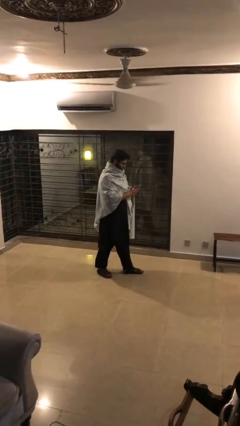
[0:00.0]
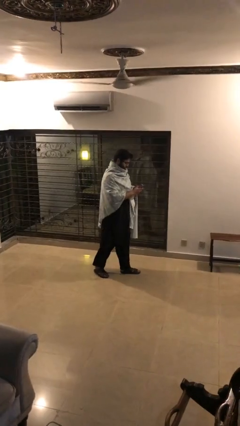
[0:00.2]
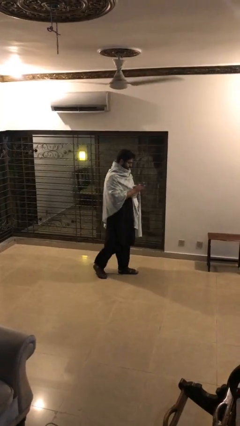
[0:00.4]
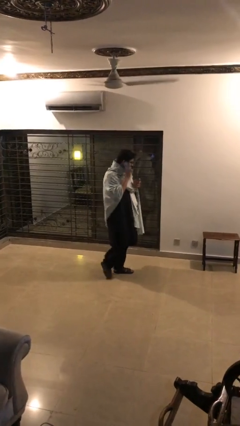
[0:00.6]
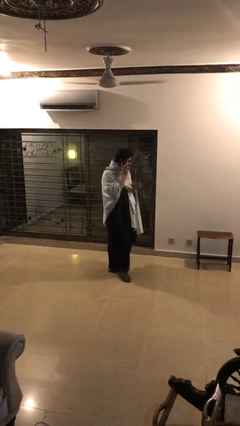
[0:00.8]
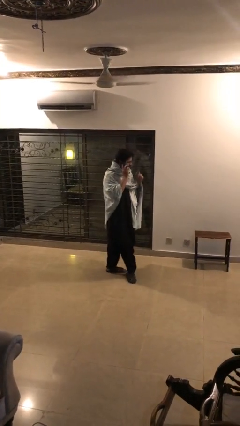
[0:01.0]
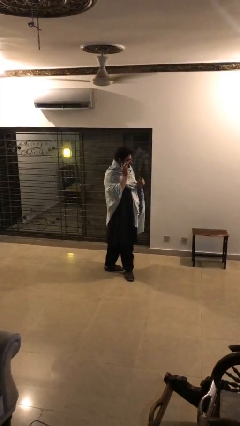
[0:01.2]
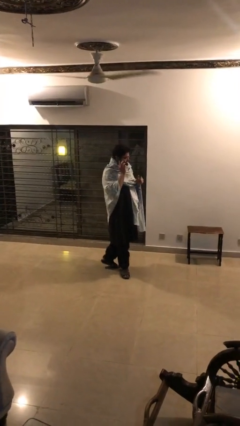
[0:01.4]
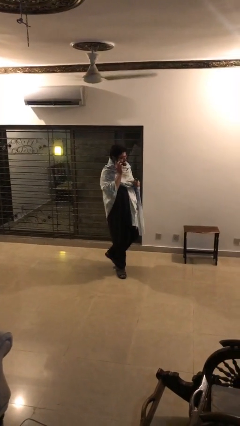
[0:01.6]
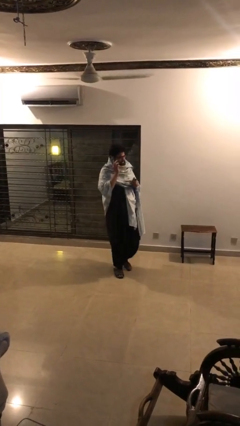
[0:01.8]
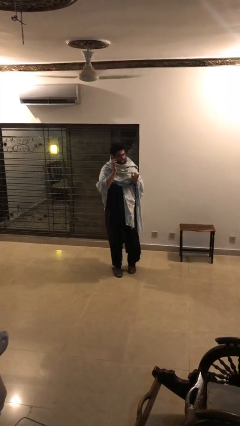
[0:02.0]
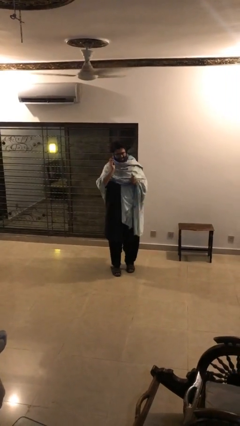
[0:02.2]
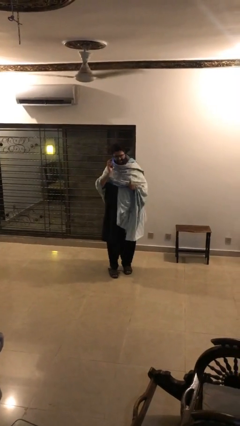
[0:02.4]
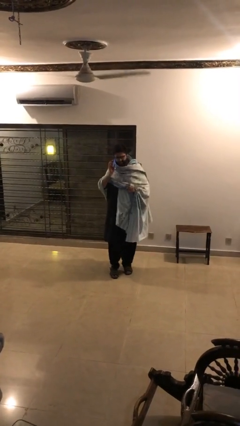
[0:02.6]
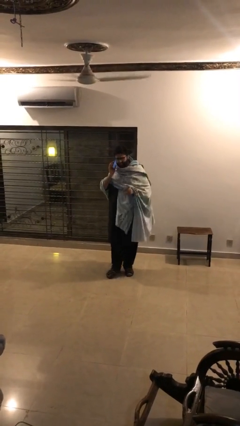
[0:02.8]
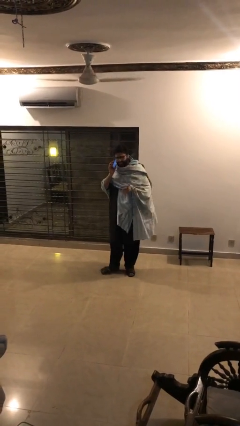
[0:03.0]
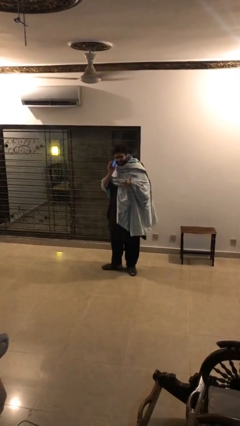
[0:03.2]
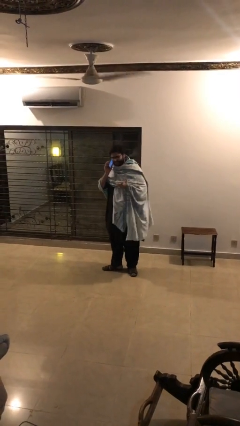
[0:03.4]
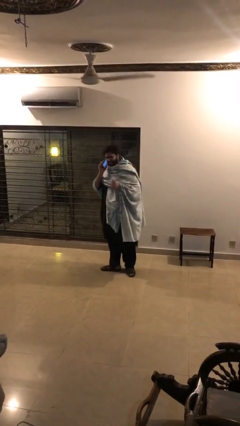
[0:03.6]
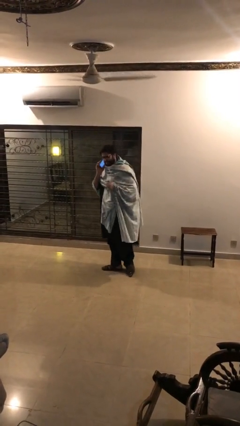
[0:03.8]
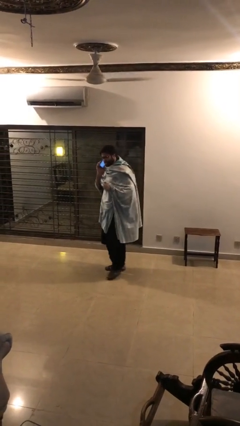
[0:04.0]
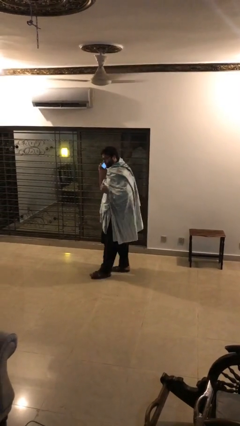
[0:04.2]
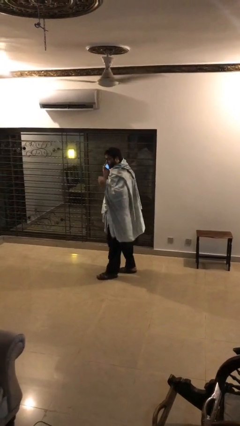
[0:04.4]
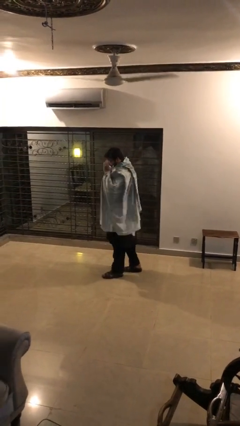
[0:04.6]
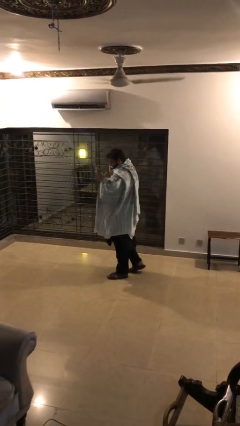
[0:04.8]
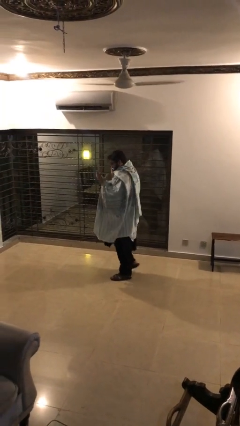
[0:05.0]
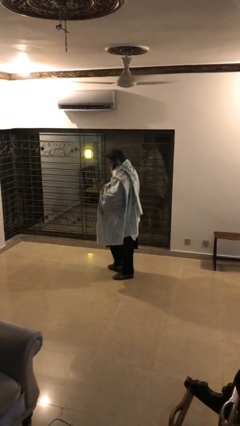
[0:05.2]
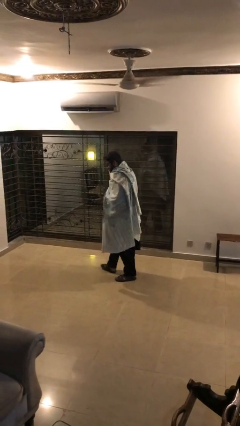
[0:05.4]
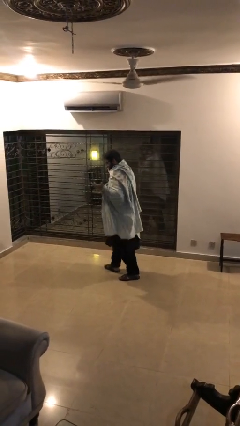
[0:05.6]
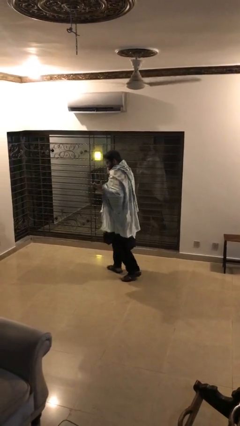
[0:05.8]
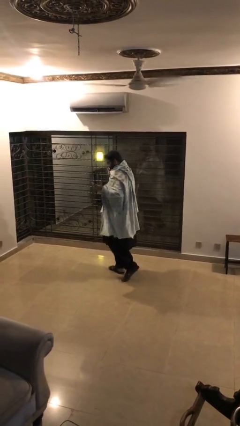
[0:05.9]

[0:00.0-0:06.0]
person talks on phone

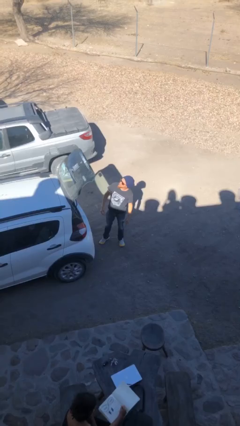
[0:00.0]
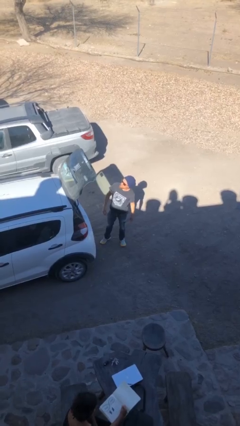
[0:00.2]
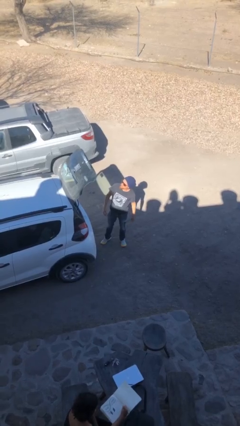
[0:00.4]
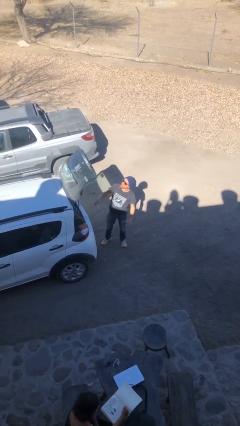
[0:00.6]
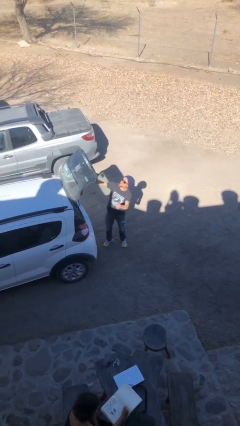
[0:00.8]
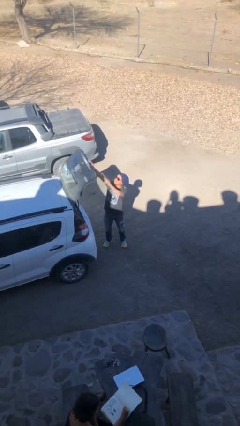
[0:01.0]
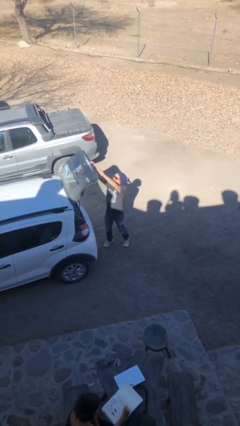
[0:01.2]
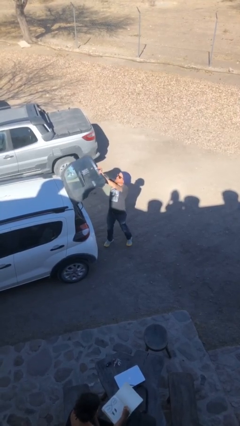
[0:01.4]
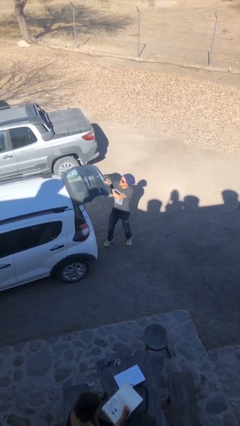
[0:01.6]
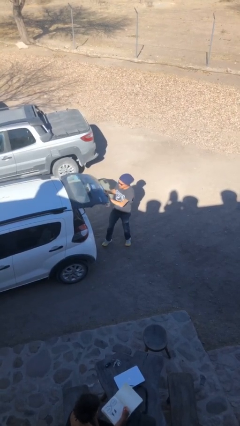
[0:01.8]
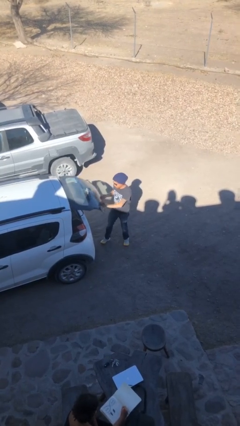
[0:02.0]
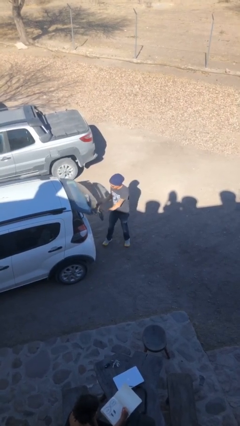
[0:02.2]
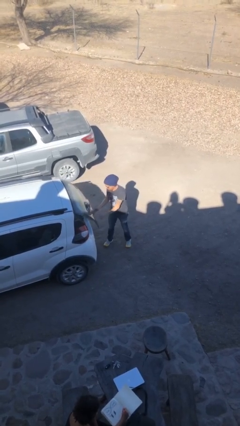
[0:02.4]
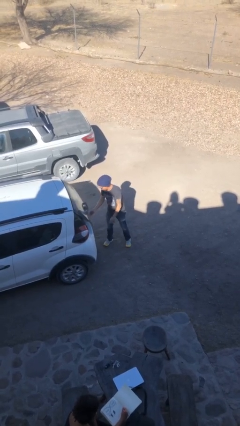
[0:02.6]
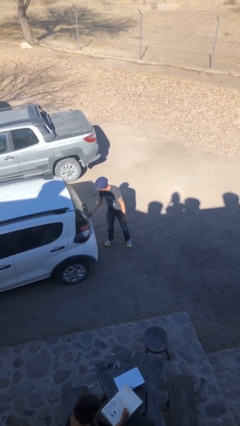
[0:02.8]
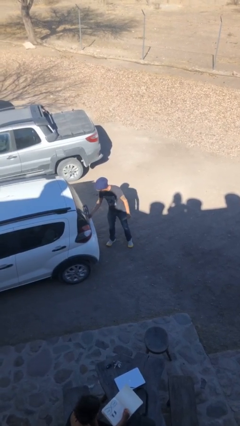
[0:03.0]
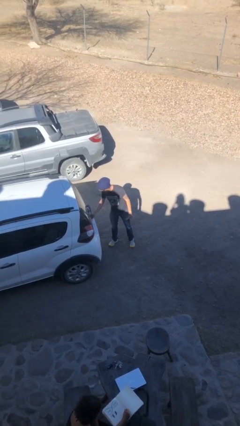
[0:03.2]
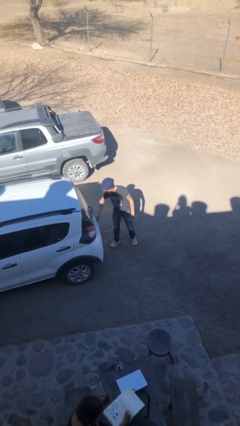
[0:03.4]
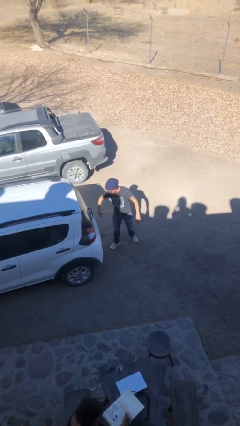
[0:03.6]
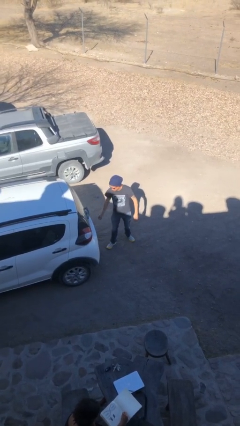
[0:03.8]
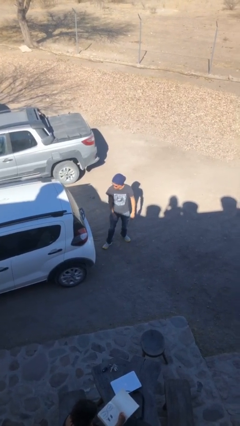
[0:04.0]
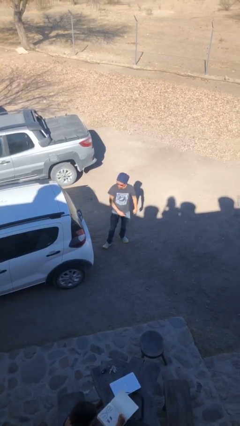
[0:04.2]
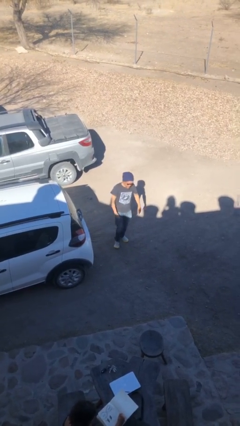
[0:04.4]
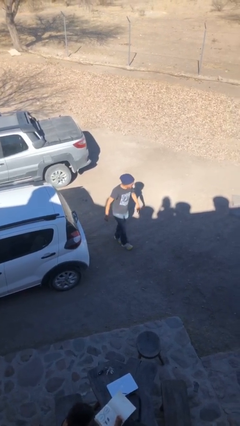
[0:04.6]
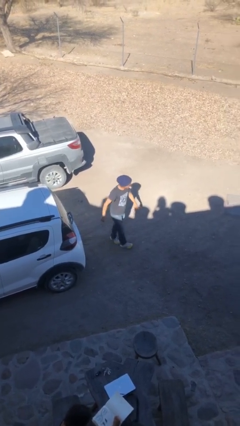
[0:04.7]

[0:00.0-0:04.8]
person closes car trunk

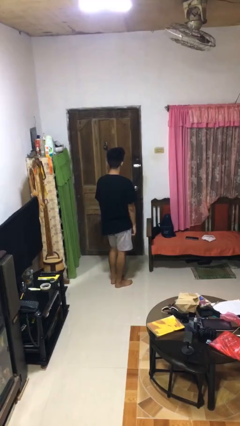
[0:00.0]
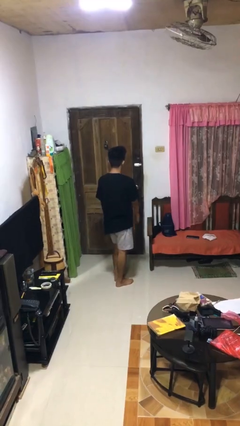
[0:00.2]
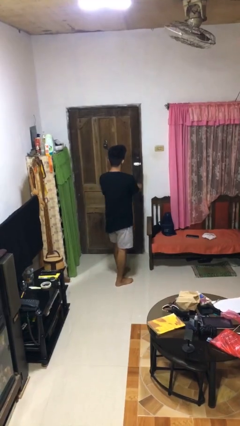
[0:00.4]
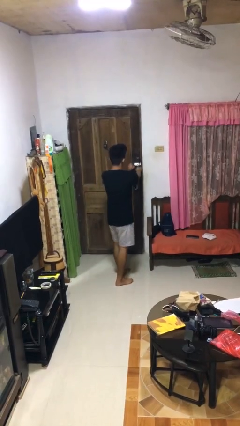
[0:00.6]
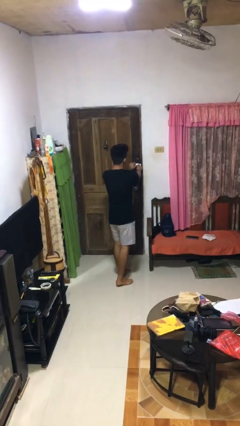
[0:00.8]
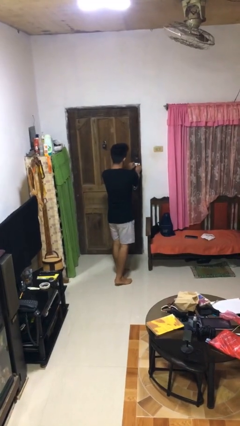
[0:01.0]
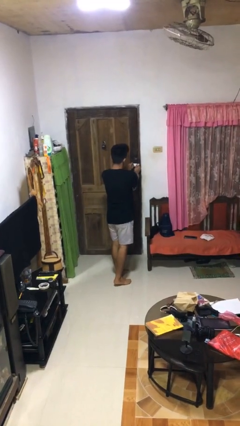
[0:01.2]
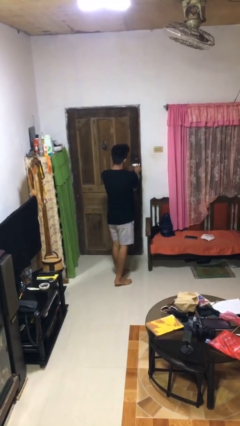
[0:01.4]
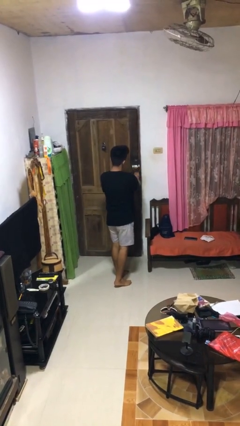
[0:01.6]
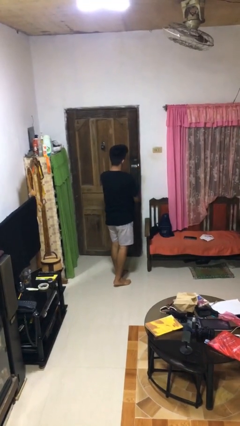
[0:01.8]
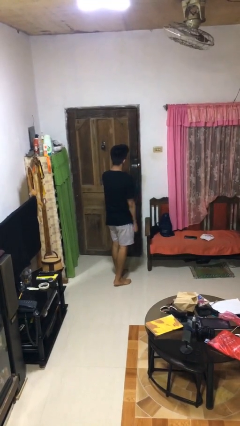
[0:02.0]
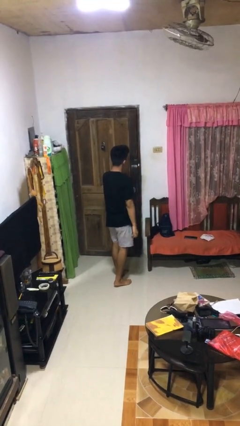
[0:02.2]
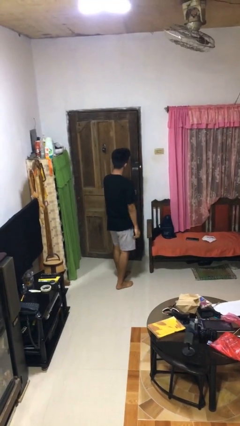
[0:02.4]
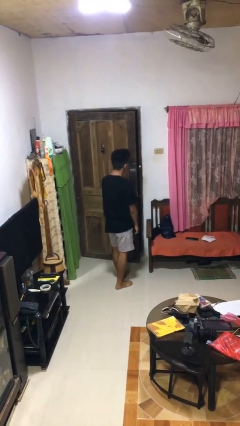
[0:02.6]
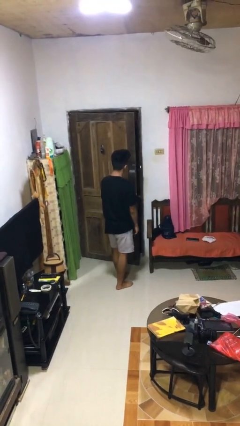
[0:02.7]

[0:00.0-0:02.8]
person unlocks door with keys

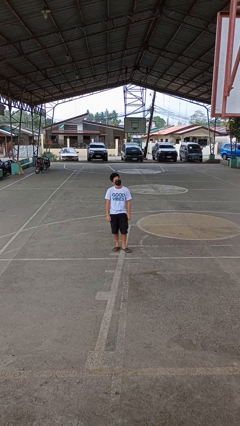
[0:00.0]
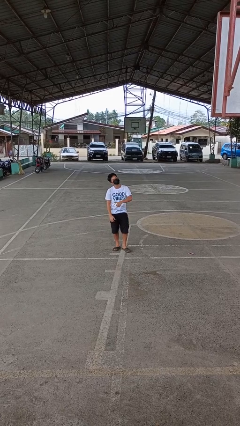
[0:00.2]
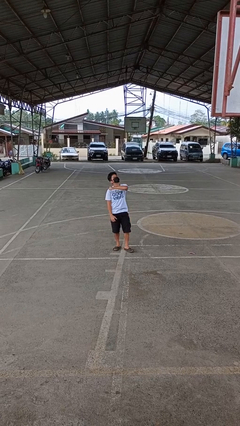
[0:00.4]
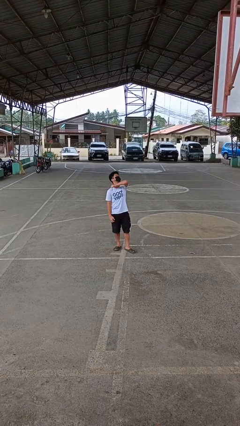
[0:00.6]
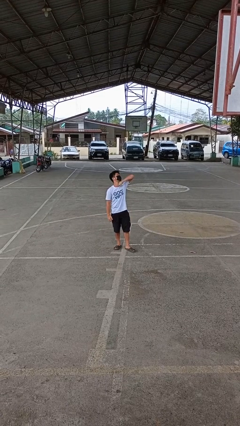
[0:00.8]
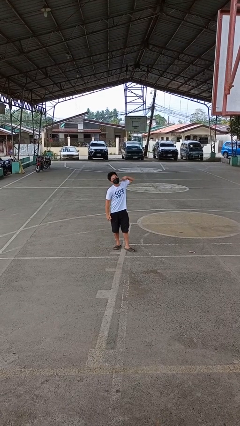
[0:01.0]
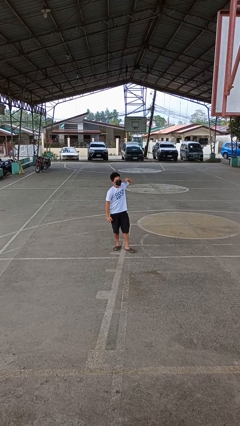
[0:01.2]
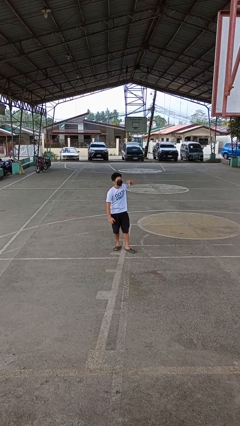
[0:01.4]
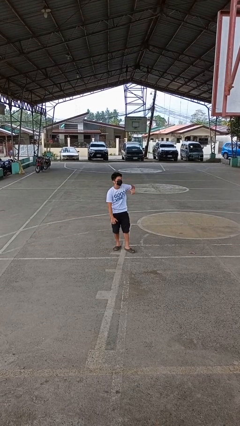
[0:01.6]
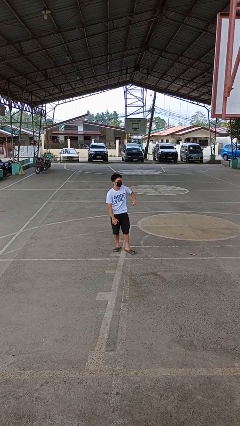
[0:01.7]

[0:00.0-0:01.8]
person gestures cut

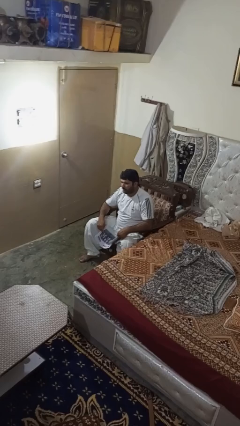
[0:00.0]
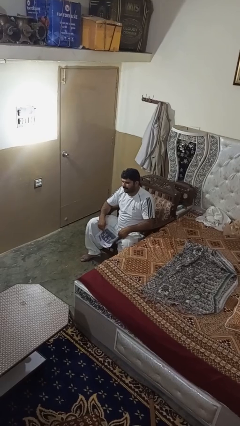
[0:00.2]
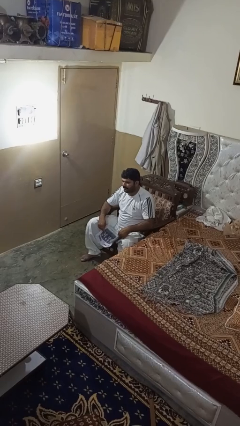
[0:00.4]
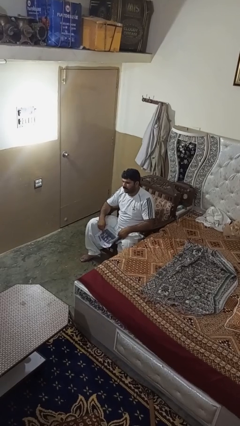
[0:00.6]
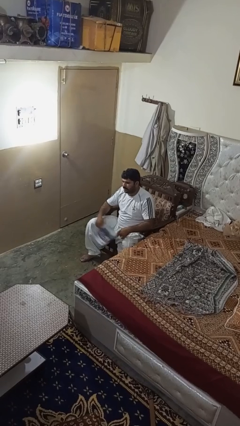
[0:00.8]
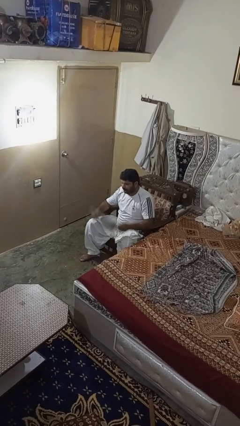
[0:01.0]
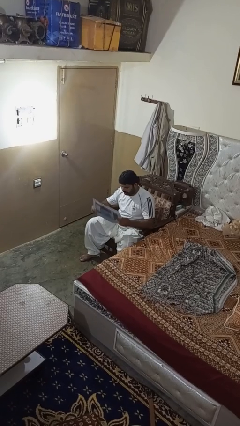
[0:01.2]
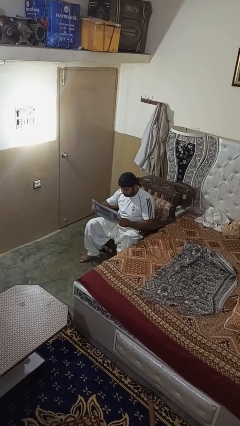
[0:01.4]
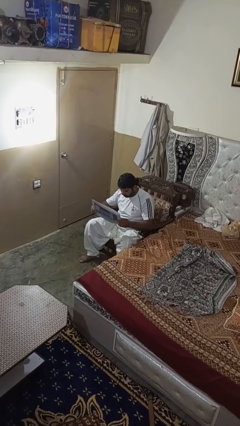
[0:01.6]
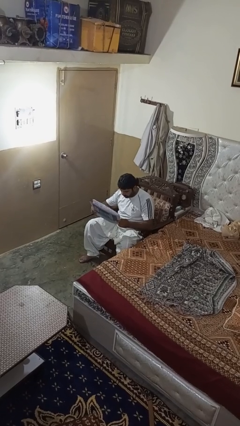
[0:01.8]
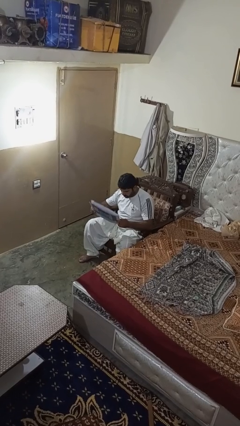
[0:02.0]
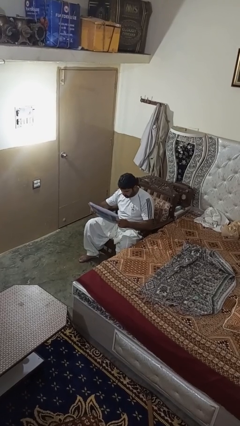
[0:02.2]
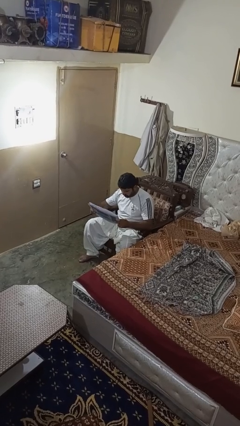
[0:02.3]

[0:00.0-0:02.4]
person reads newspaper
